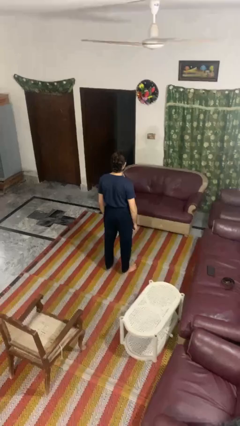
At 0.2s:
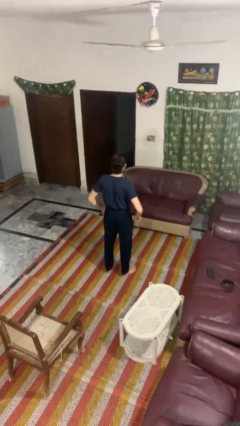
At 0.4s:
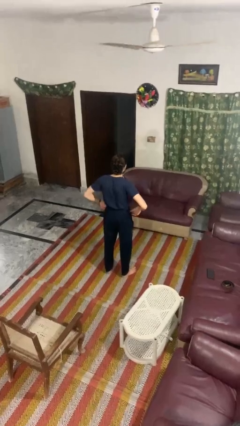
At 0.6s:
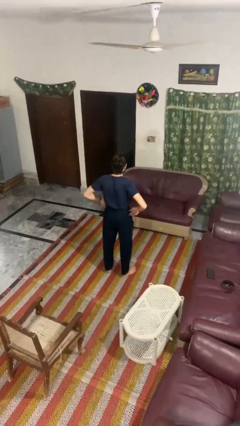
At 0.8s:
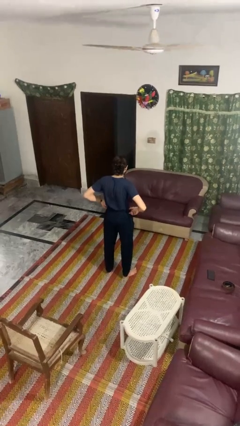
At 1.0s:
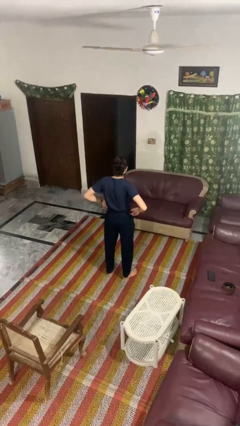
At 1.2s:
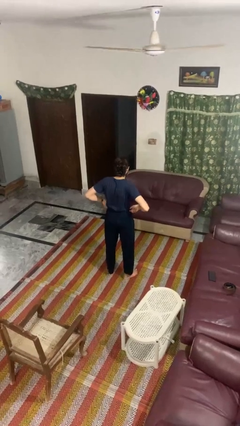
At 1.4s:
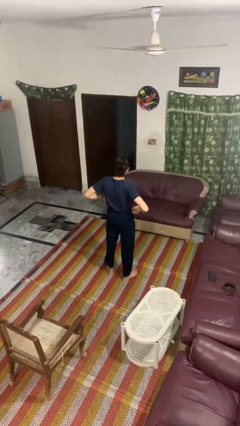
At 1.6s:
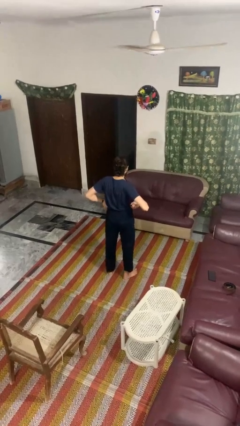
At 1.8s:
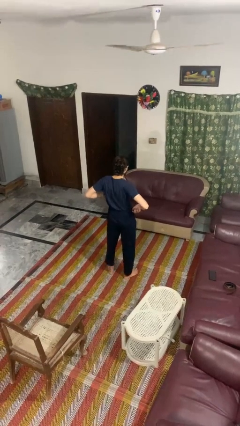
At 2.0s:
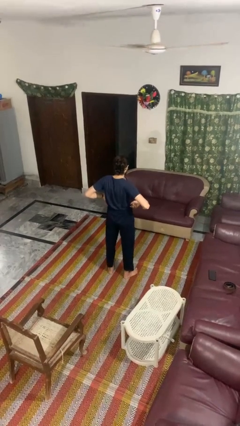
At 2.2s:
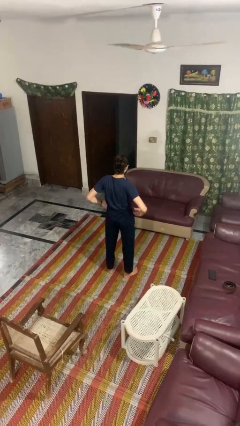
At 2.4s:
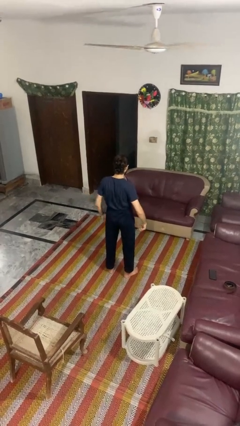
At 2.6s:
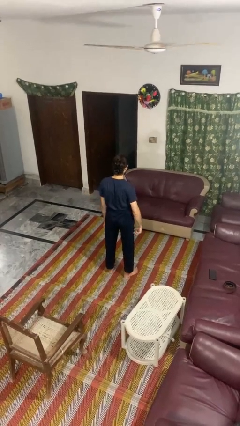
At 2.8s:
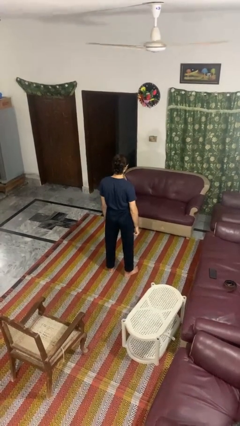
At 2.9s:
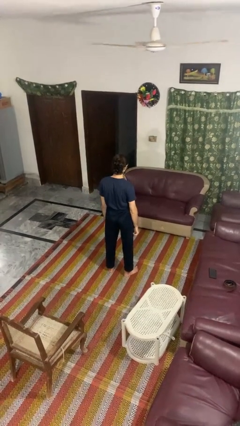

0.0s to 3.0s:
person hikes up pants

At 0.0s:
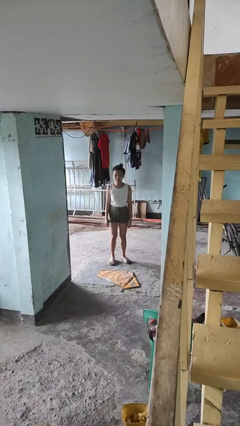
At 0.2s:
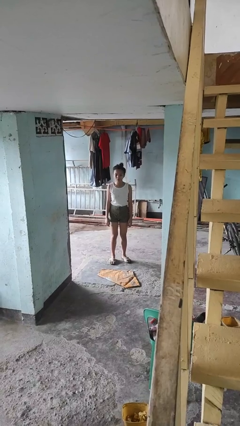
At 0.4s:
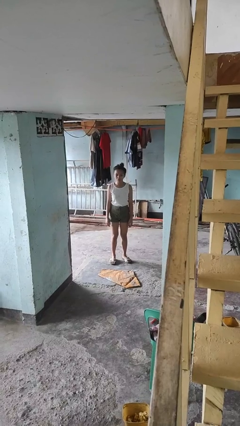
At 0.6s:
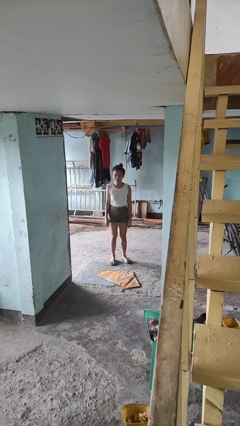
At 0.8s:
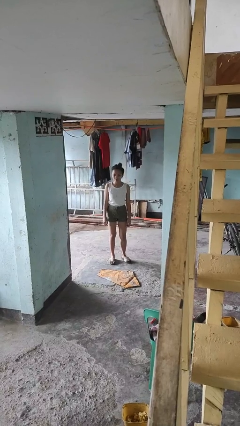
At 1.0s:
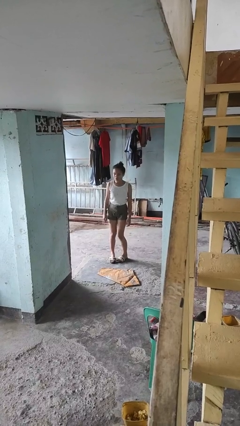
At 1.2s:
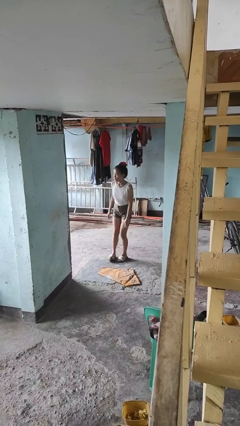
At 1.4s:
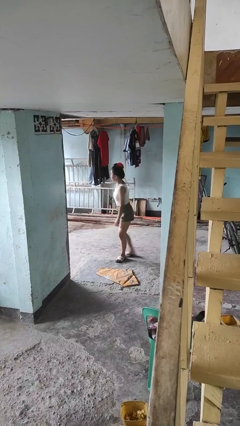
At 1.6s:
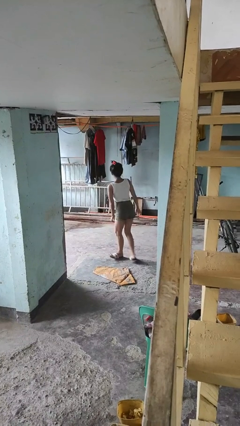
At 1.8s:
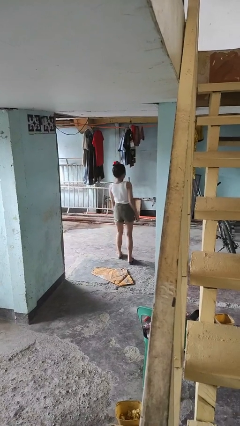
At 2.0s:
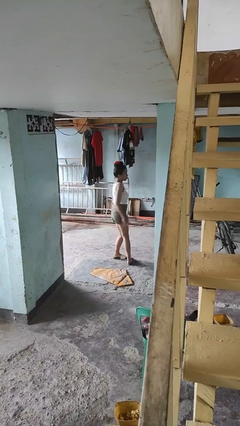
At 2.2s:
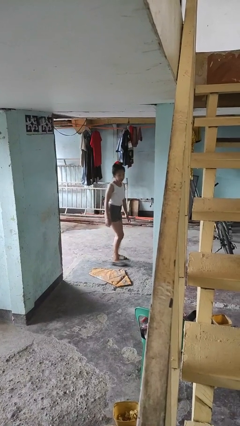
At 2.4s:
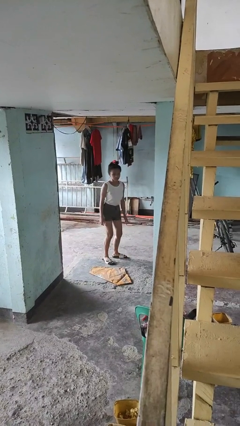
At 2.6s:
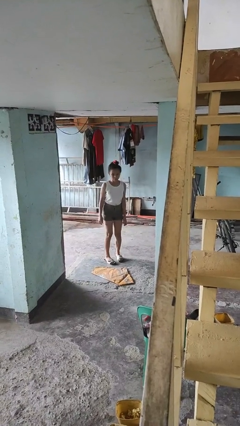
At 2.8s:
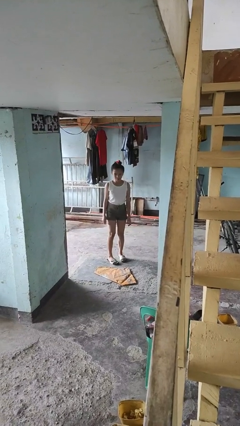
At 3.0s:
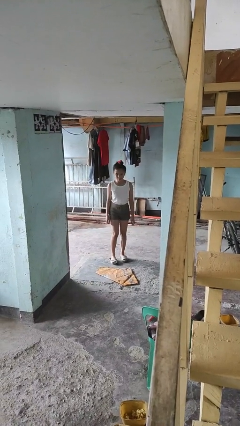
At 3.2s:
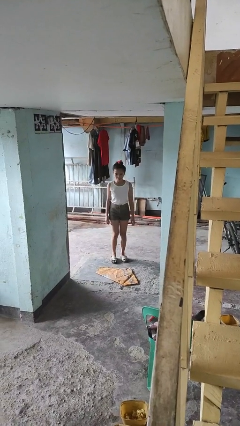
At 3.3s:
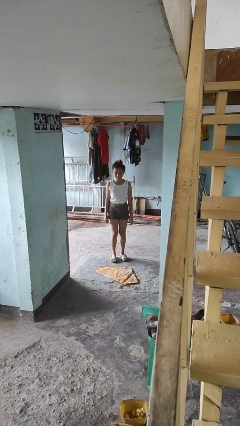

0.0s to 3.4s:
person twirls

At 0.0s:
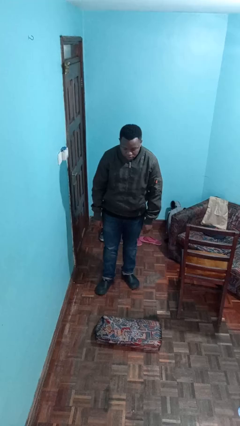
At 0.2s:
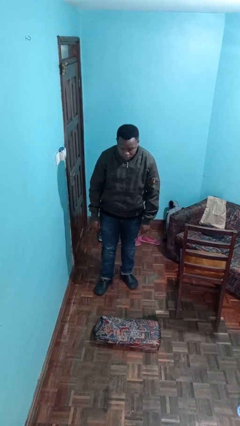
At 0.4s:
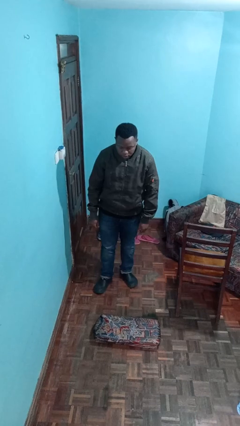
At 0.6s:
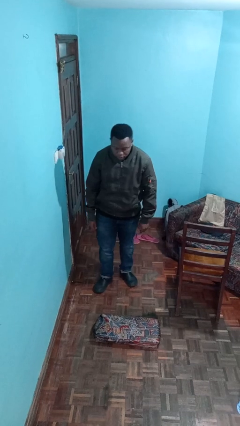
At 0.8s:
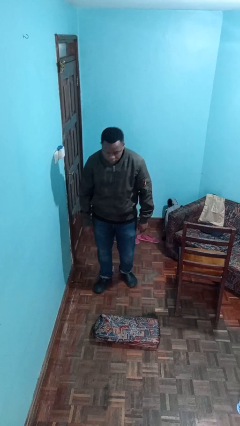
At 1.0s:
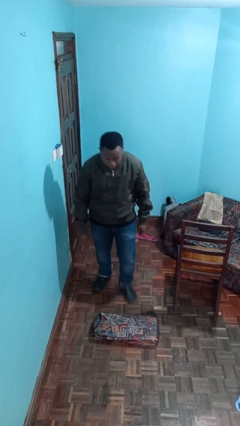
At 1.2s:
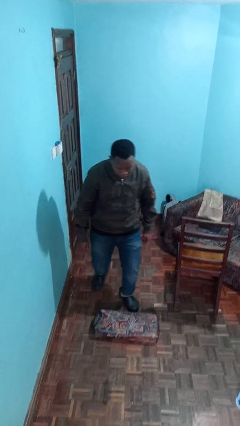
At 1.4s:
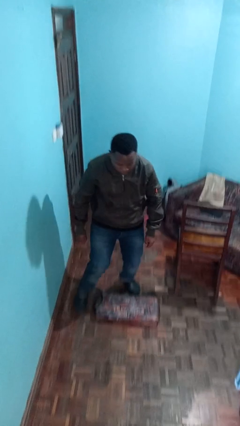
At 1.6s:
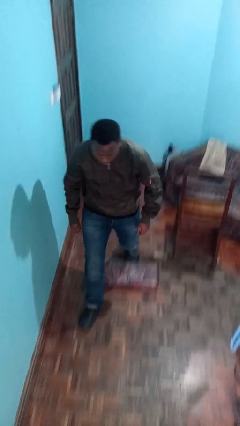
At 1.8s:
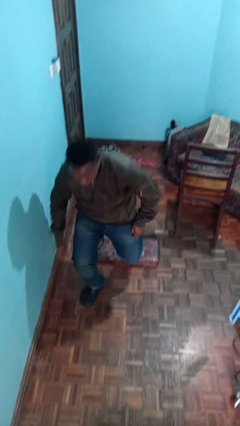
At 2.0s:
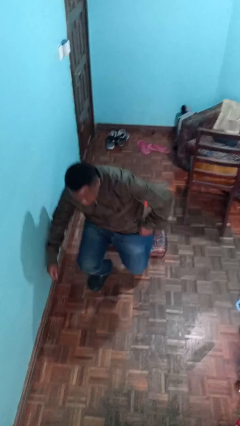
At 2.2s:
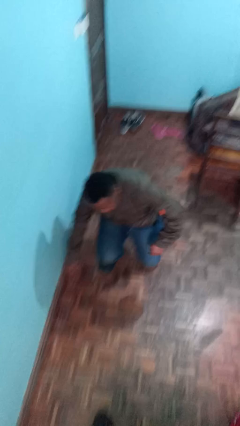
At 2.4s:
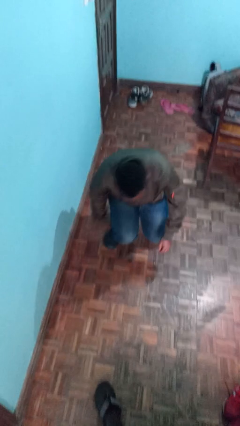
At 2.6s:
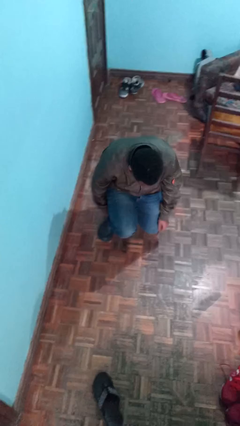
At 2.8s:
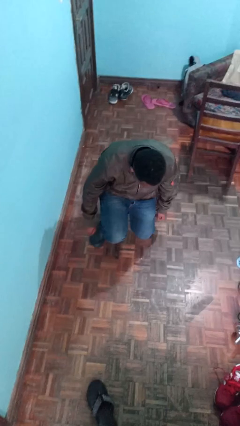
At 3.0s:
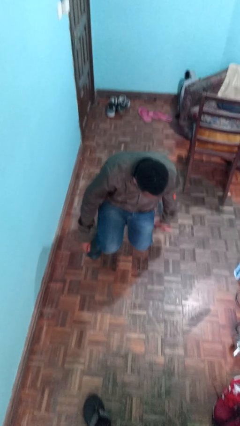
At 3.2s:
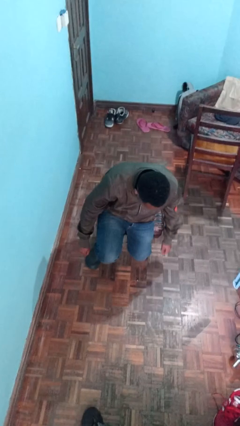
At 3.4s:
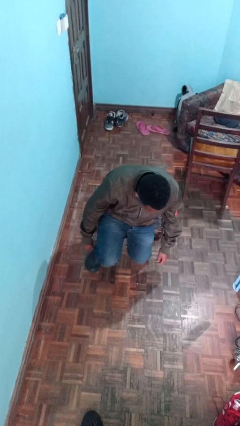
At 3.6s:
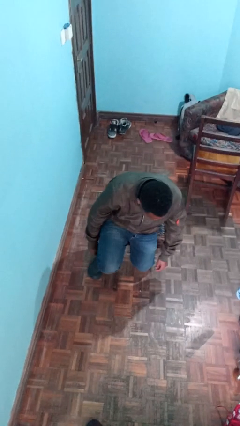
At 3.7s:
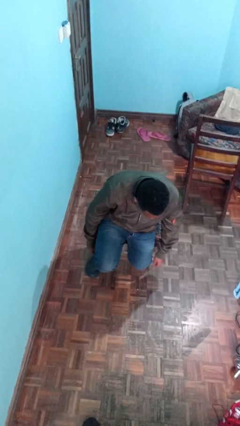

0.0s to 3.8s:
person trips on object on floor

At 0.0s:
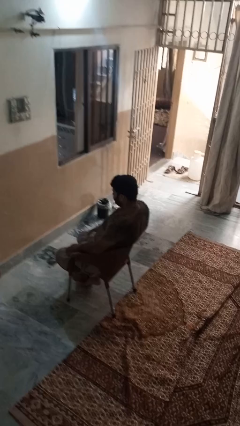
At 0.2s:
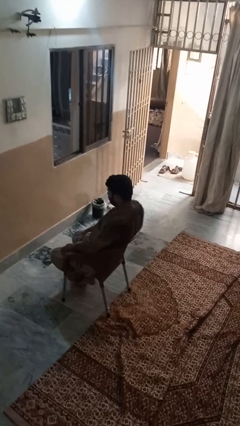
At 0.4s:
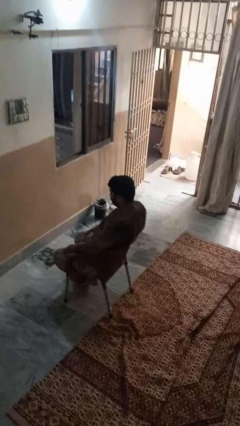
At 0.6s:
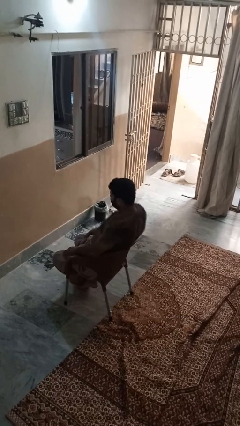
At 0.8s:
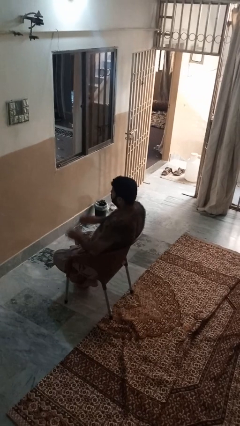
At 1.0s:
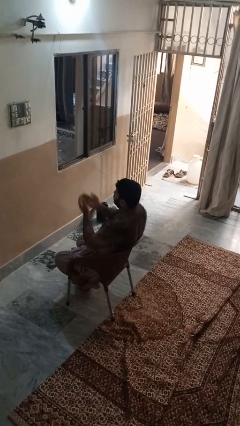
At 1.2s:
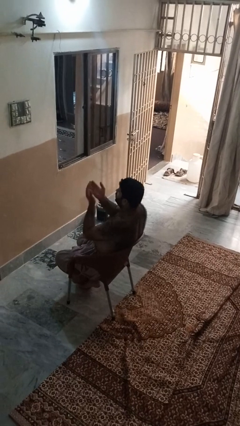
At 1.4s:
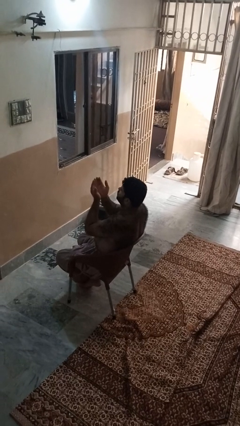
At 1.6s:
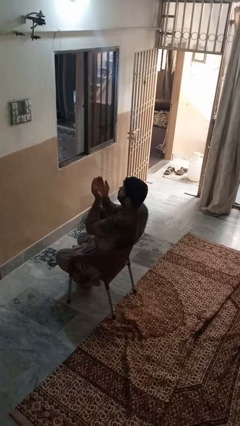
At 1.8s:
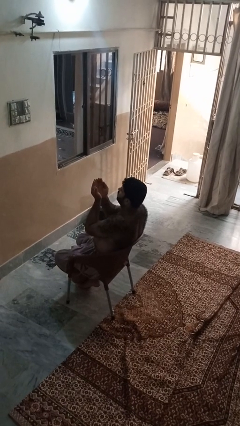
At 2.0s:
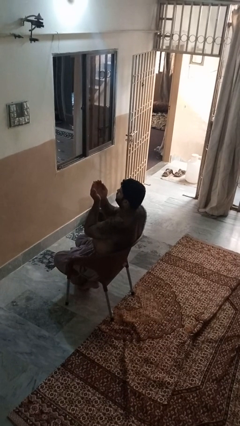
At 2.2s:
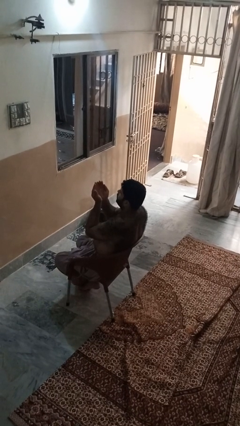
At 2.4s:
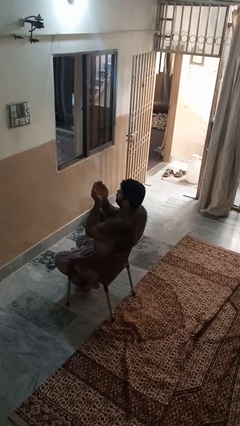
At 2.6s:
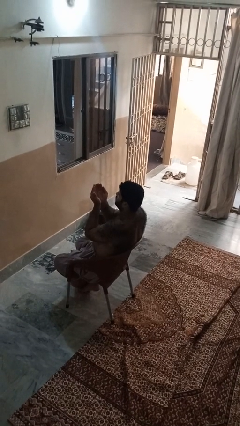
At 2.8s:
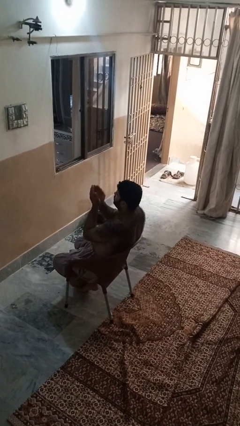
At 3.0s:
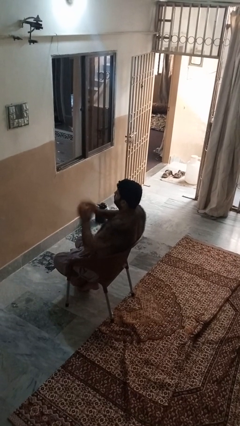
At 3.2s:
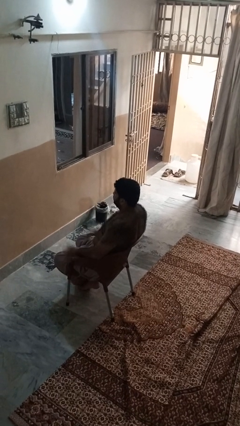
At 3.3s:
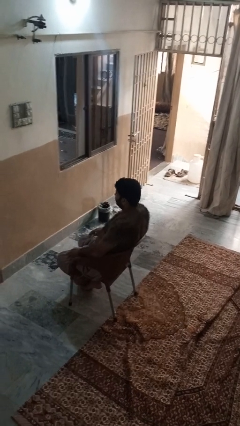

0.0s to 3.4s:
person prays

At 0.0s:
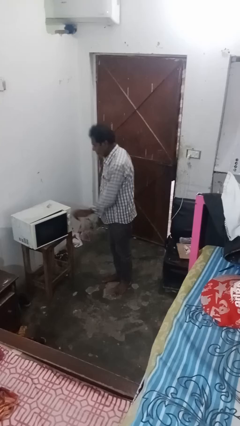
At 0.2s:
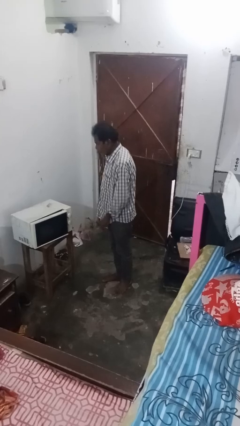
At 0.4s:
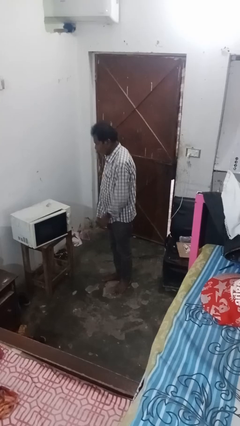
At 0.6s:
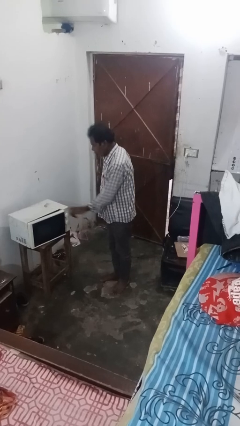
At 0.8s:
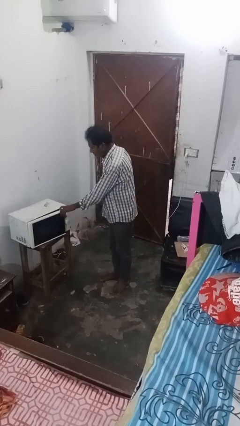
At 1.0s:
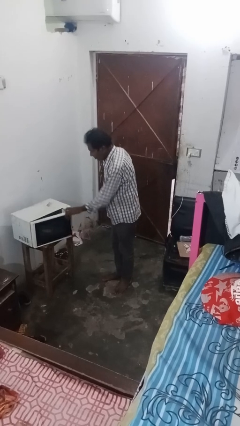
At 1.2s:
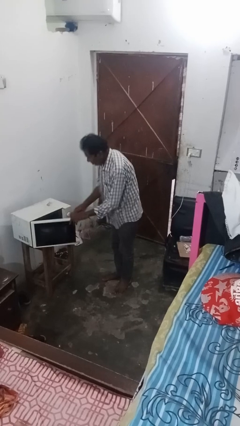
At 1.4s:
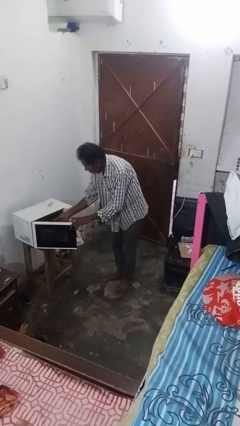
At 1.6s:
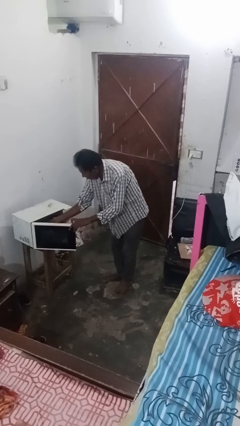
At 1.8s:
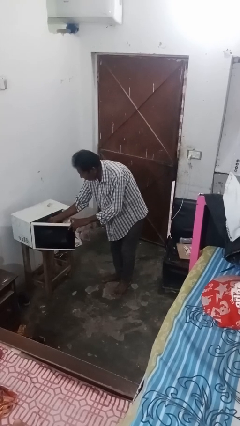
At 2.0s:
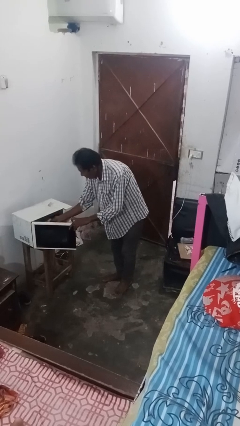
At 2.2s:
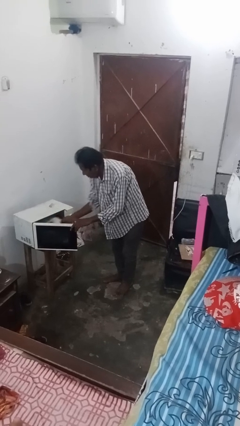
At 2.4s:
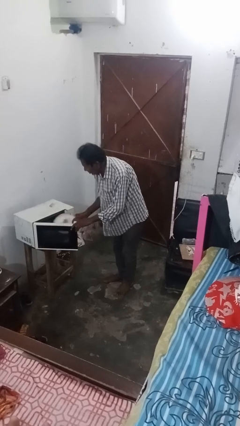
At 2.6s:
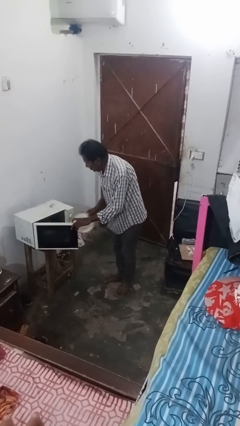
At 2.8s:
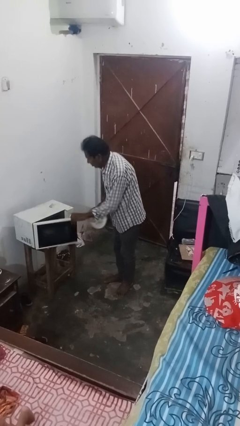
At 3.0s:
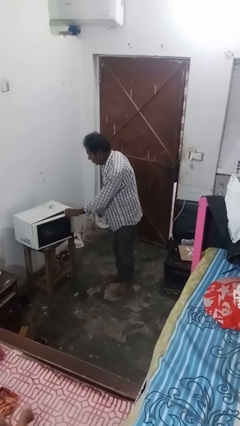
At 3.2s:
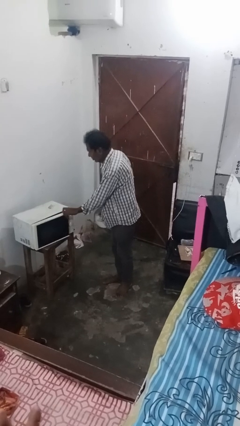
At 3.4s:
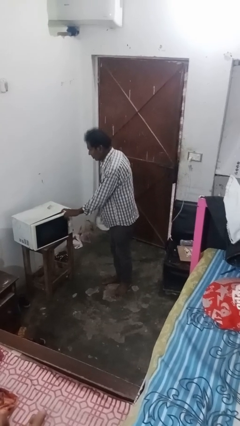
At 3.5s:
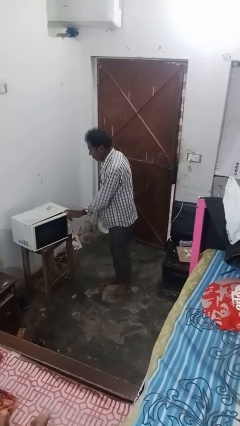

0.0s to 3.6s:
person takes object from microwave

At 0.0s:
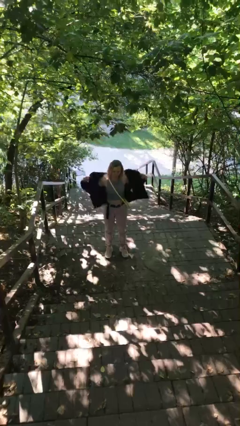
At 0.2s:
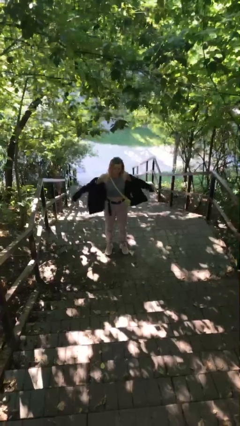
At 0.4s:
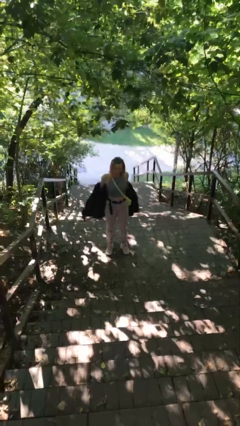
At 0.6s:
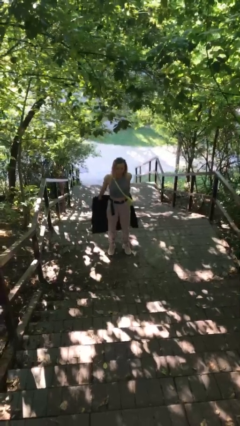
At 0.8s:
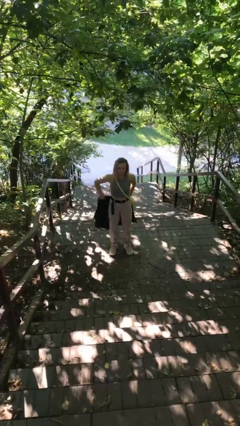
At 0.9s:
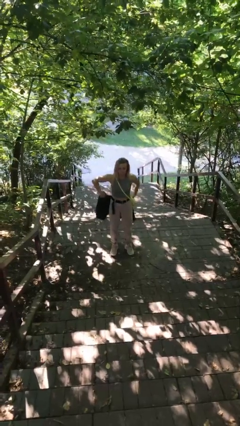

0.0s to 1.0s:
person takes off jacket
